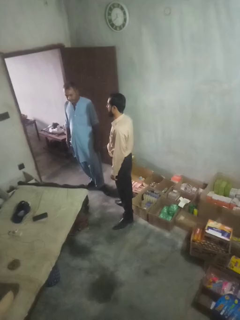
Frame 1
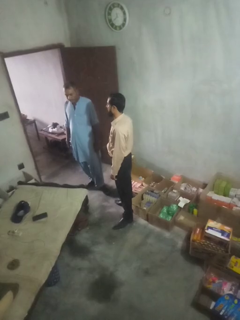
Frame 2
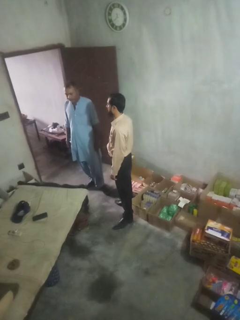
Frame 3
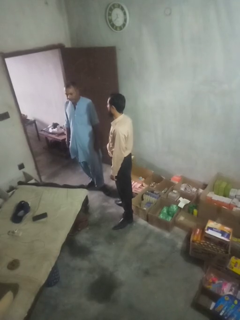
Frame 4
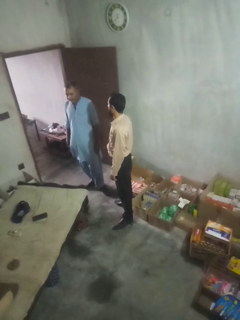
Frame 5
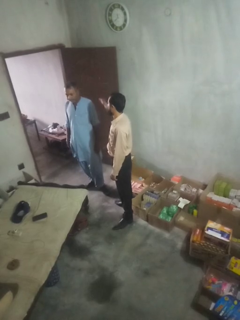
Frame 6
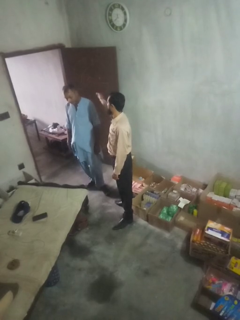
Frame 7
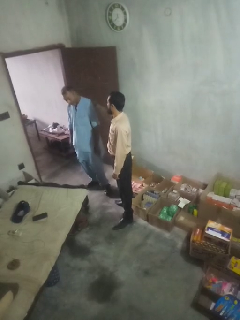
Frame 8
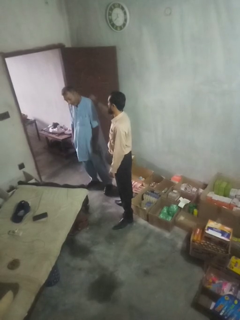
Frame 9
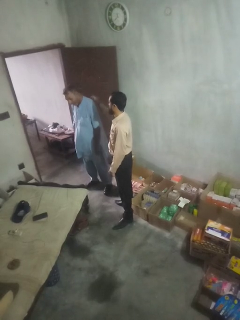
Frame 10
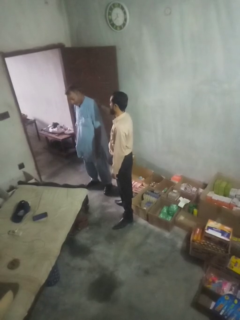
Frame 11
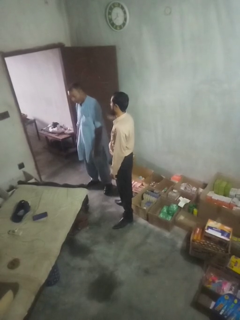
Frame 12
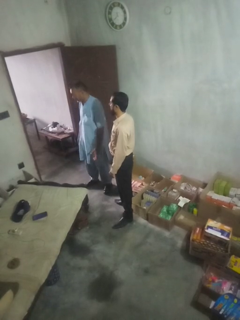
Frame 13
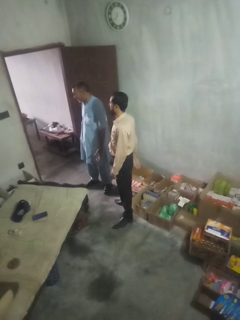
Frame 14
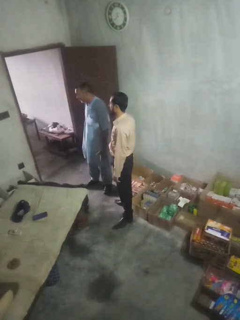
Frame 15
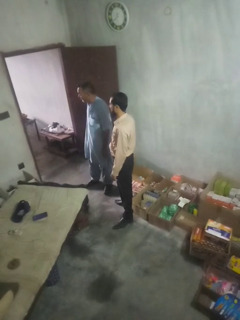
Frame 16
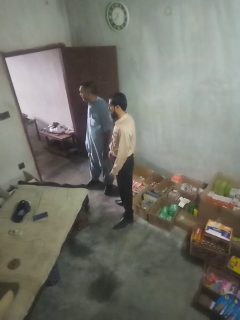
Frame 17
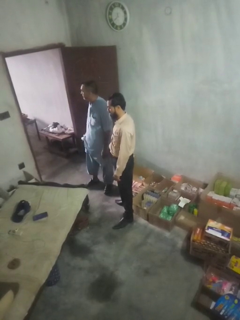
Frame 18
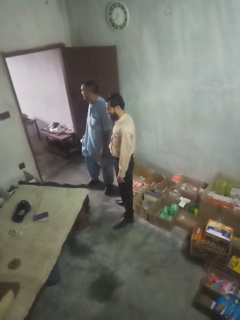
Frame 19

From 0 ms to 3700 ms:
person touches back of person

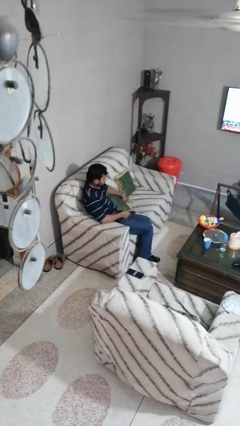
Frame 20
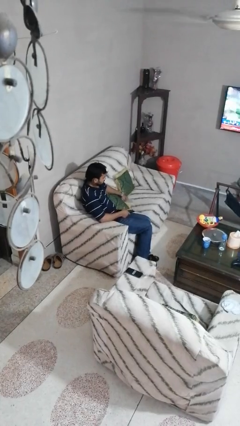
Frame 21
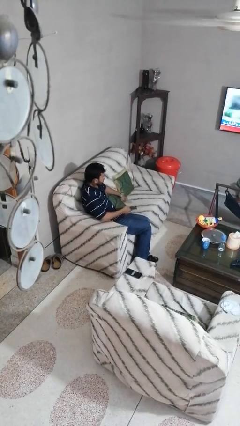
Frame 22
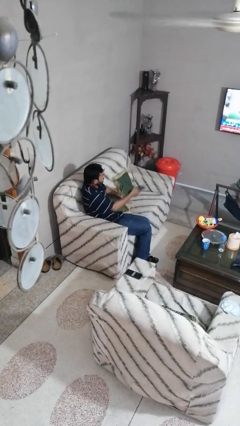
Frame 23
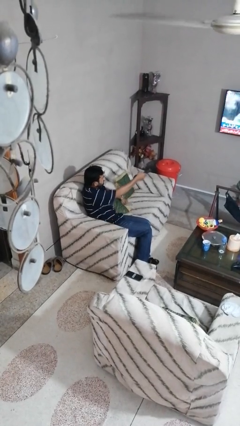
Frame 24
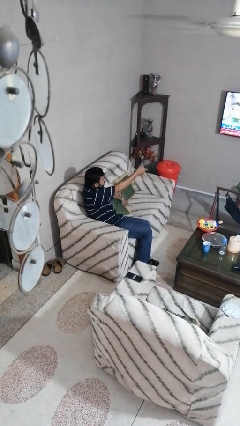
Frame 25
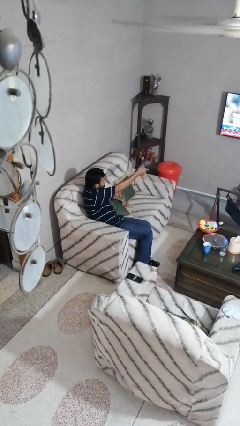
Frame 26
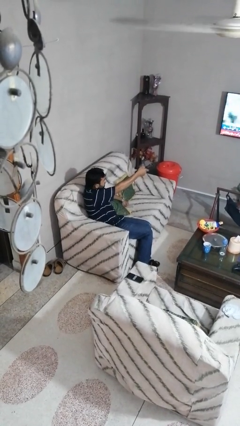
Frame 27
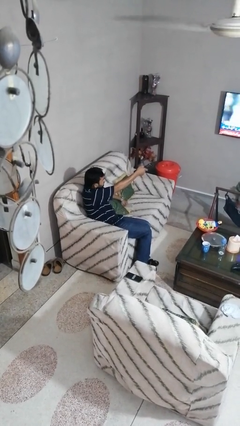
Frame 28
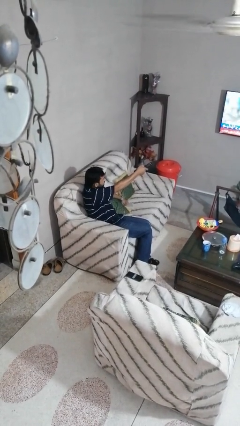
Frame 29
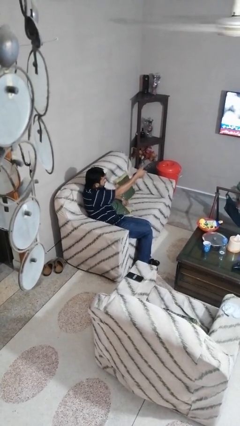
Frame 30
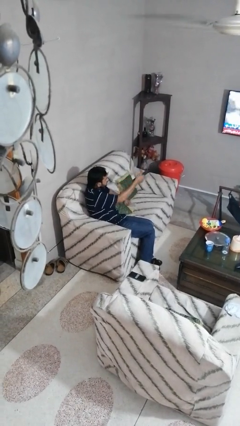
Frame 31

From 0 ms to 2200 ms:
person uses television remote

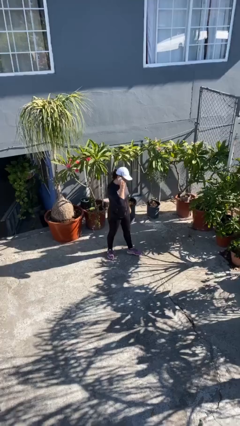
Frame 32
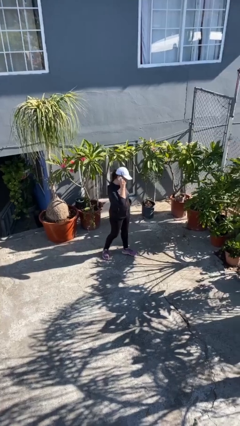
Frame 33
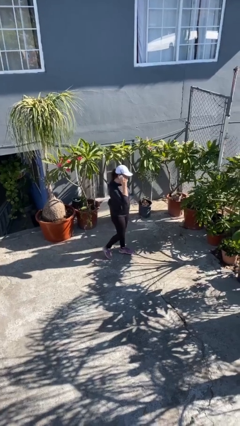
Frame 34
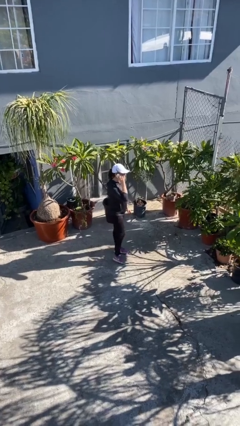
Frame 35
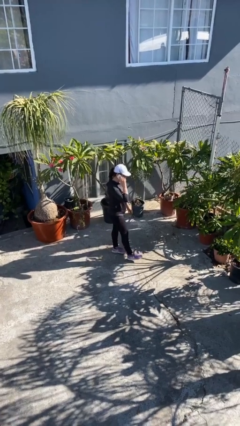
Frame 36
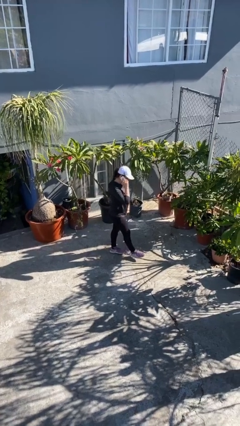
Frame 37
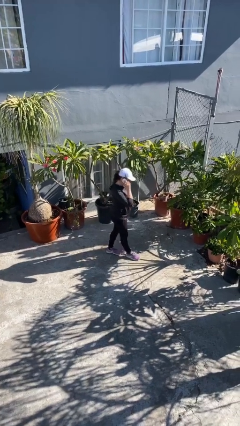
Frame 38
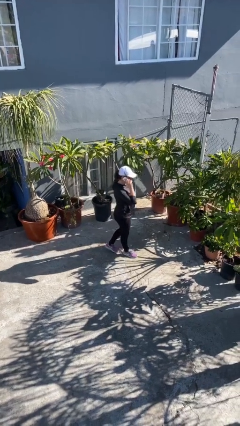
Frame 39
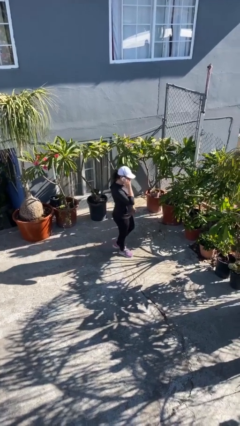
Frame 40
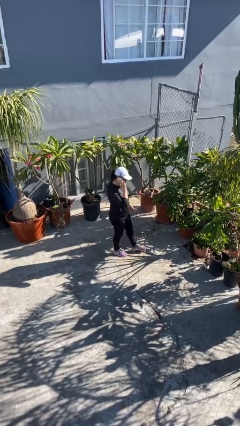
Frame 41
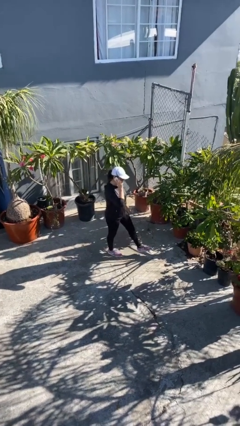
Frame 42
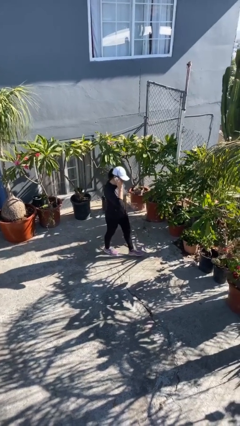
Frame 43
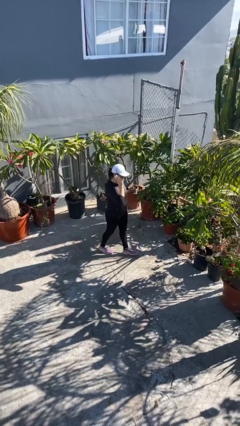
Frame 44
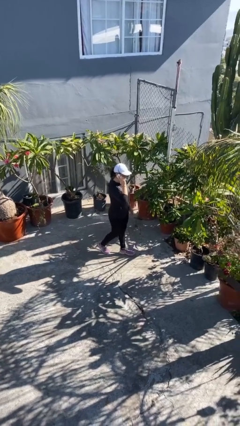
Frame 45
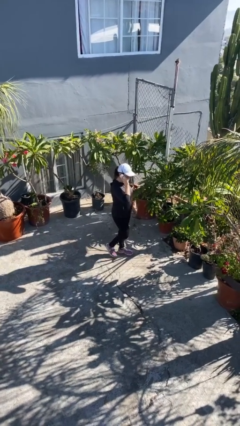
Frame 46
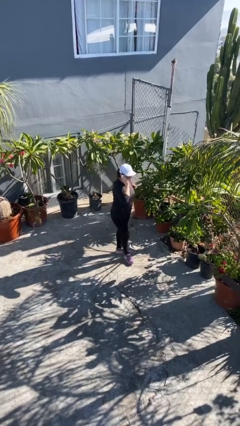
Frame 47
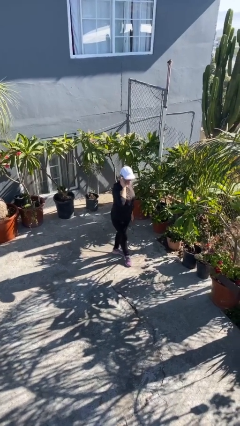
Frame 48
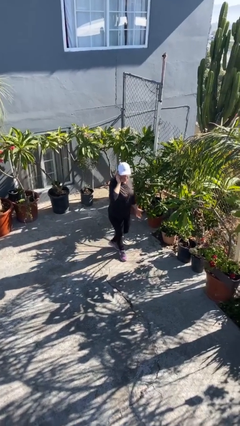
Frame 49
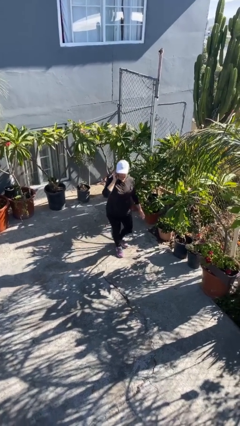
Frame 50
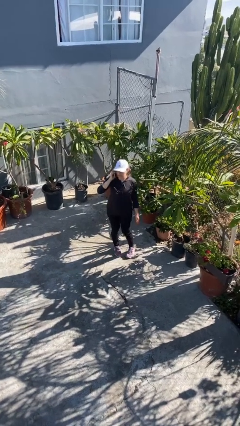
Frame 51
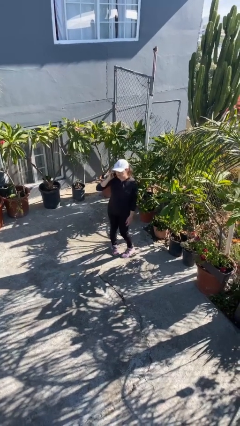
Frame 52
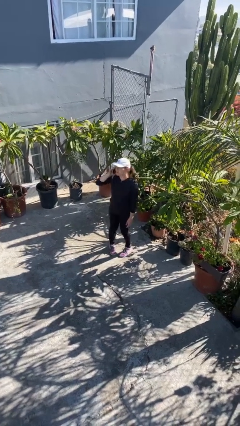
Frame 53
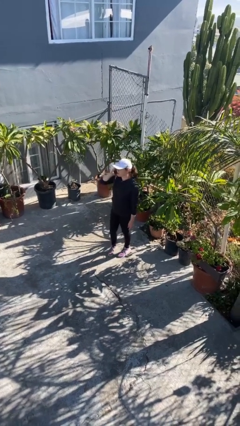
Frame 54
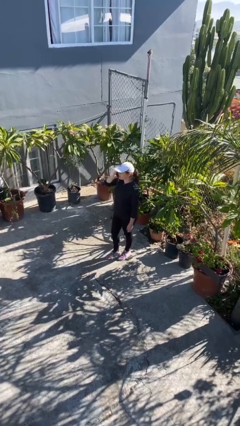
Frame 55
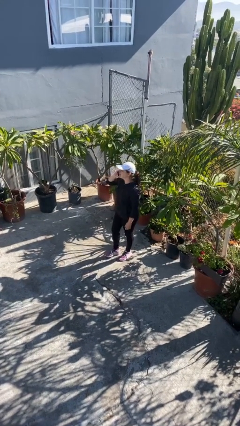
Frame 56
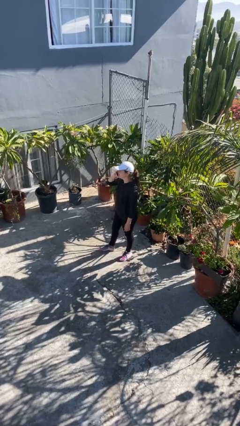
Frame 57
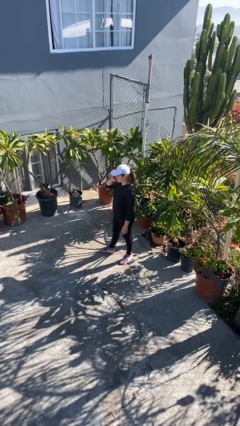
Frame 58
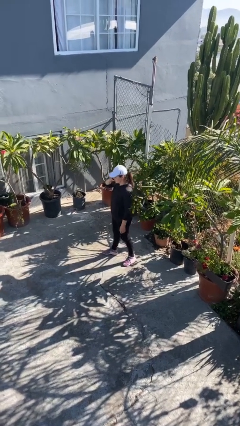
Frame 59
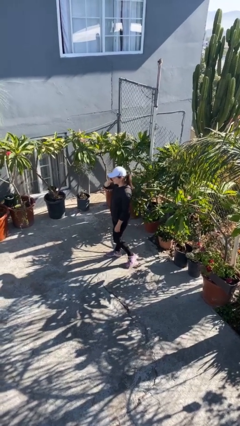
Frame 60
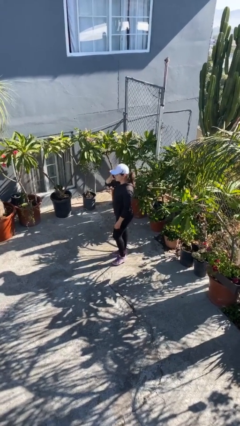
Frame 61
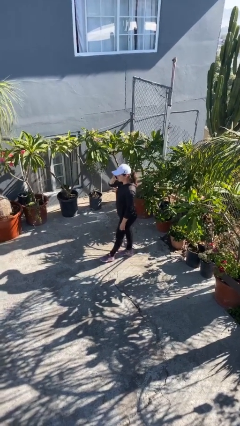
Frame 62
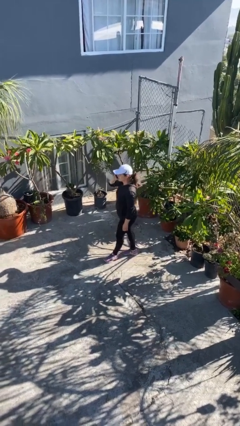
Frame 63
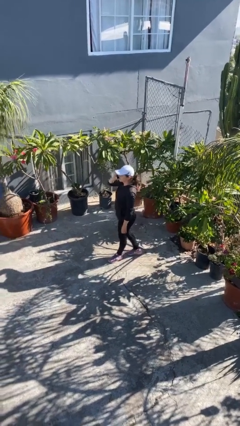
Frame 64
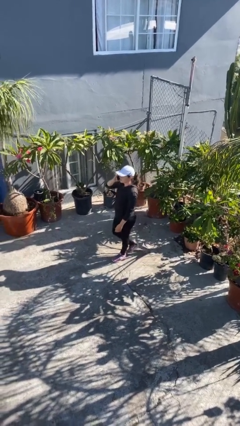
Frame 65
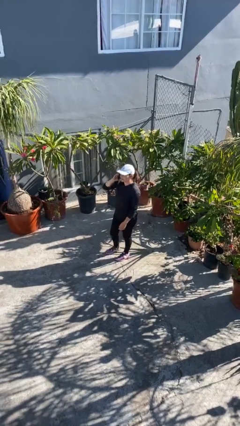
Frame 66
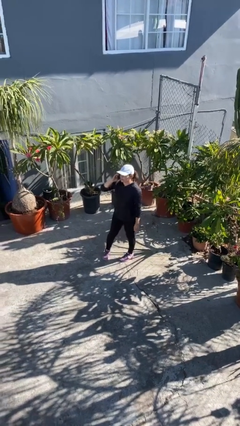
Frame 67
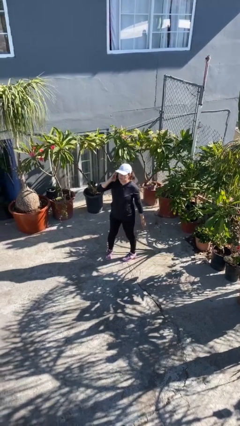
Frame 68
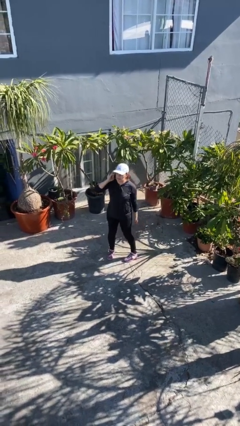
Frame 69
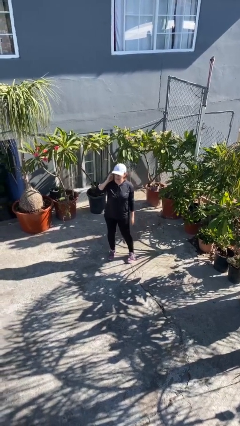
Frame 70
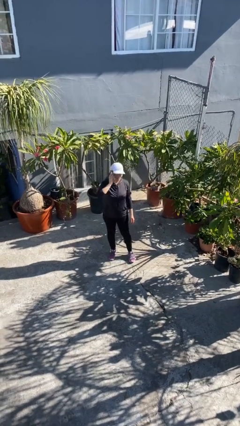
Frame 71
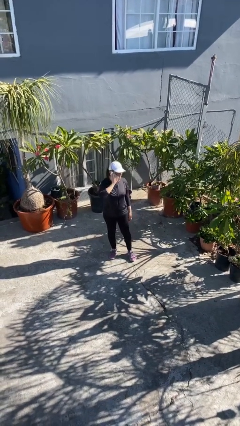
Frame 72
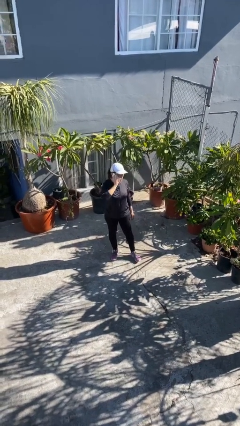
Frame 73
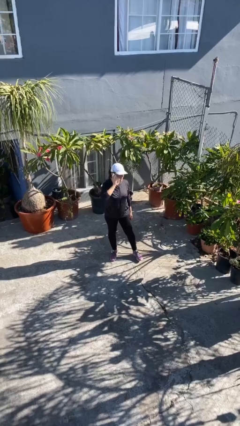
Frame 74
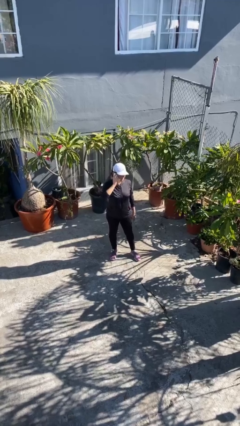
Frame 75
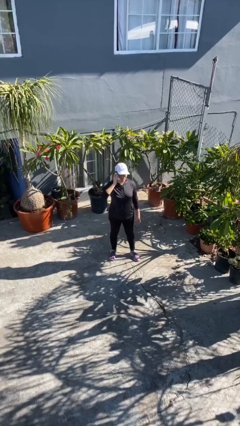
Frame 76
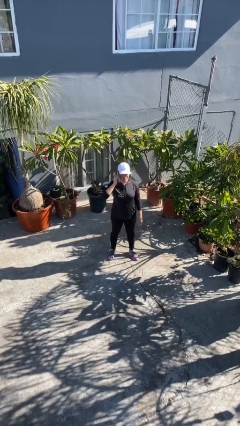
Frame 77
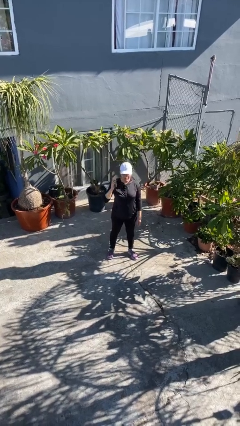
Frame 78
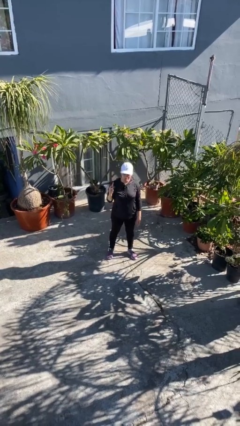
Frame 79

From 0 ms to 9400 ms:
person talks on phone

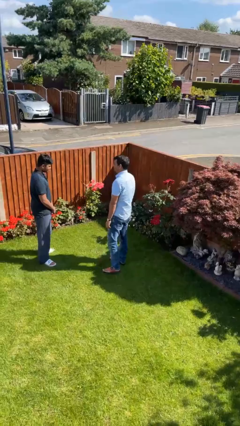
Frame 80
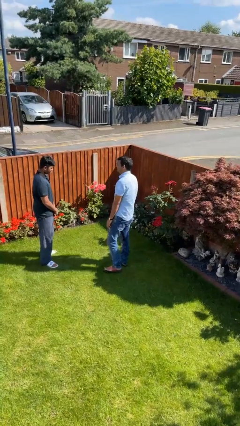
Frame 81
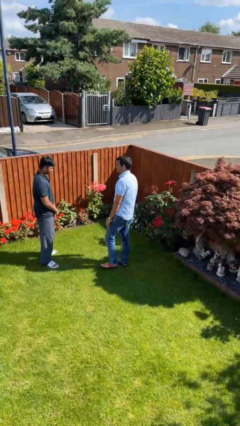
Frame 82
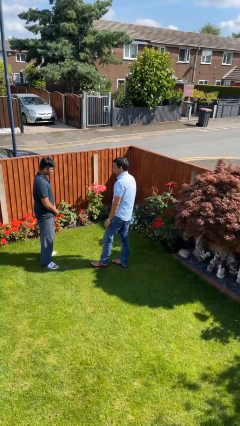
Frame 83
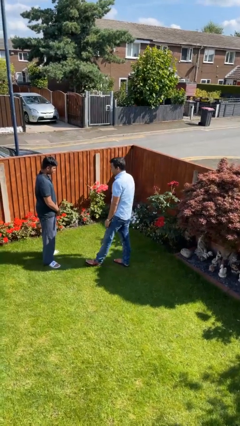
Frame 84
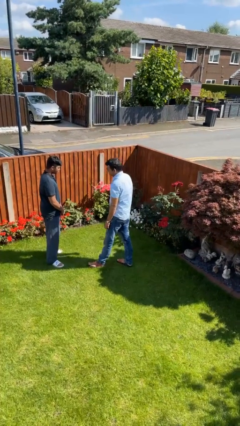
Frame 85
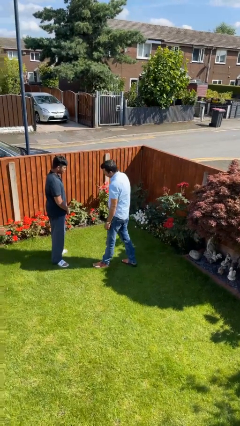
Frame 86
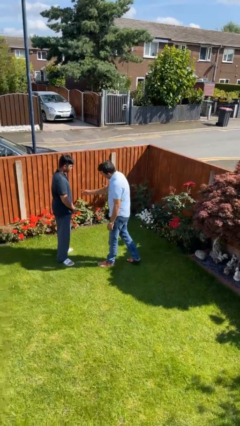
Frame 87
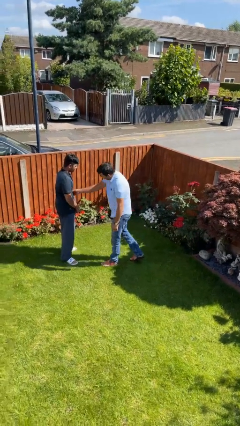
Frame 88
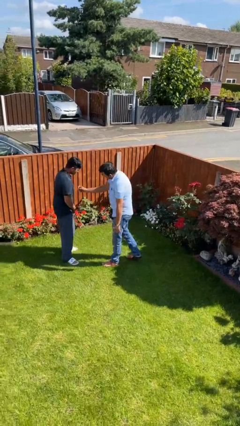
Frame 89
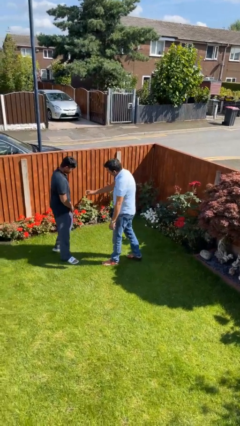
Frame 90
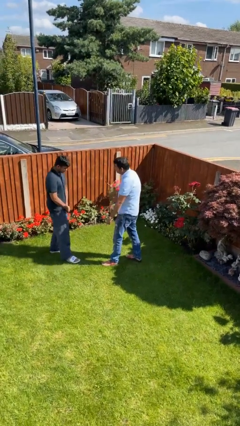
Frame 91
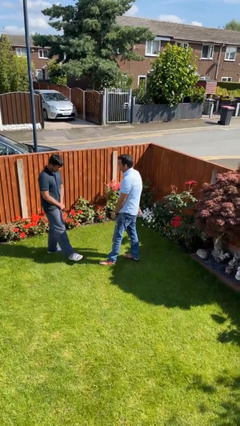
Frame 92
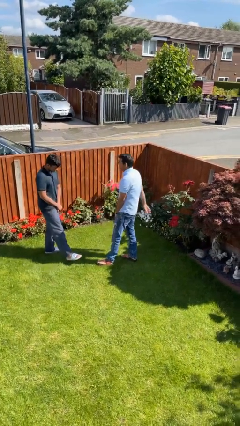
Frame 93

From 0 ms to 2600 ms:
person shoves person

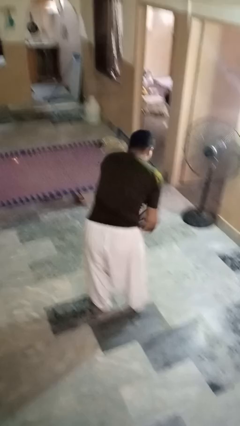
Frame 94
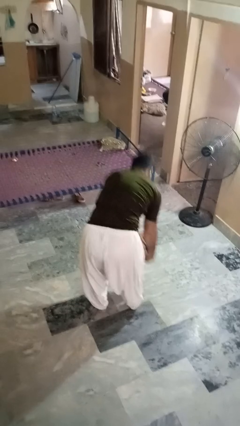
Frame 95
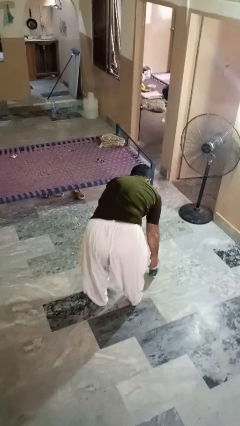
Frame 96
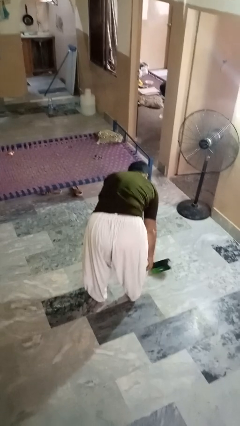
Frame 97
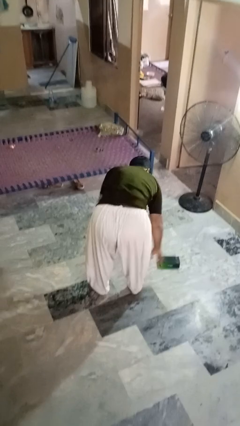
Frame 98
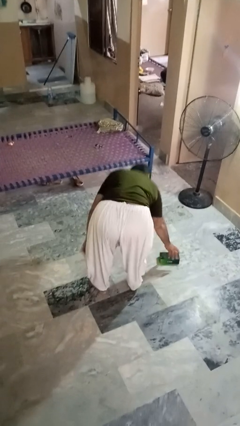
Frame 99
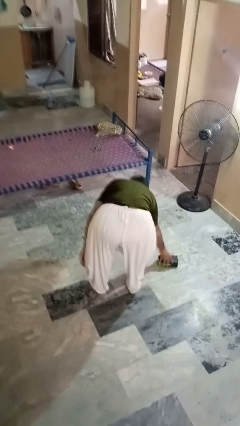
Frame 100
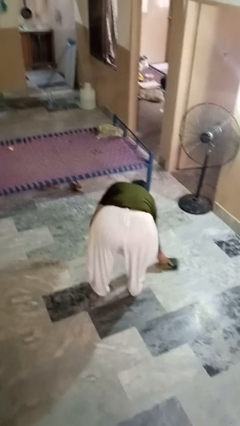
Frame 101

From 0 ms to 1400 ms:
person catches dropped object
